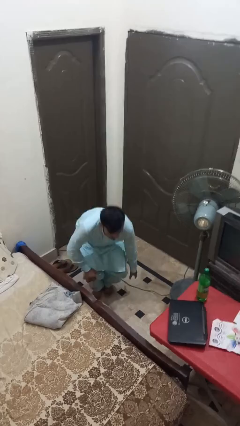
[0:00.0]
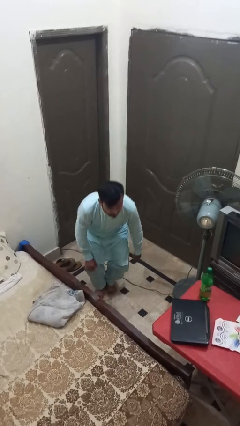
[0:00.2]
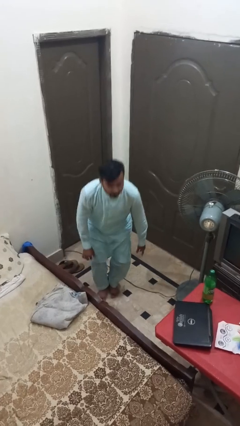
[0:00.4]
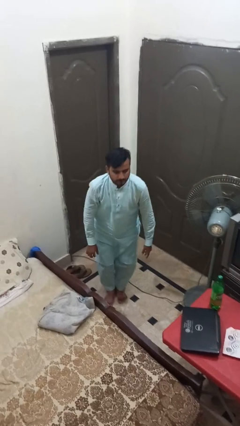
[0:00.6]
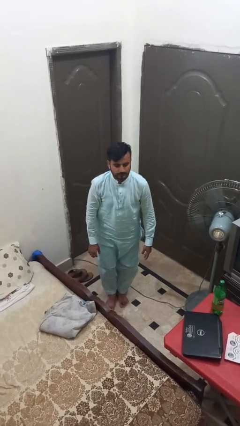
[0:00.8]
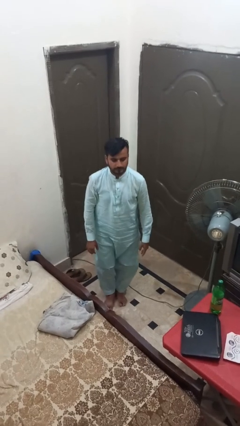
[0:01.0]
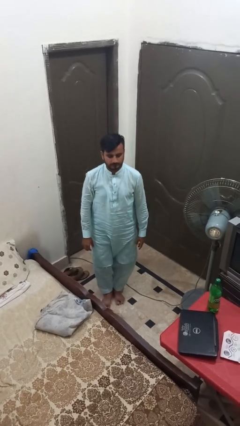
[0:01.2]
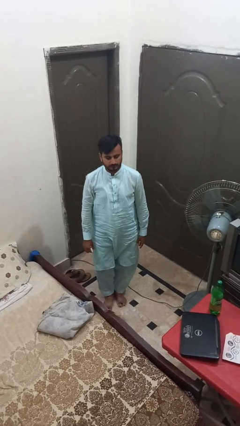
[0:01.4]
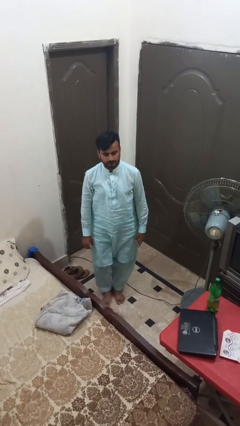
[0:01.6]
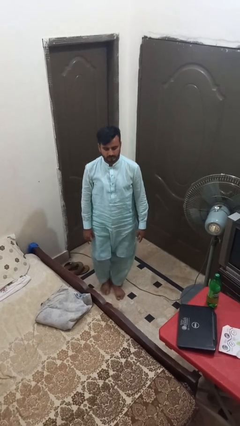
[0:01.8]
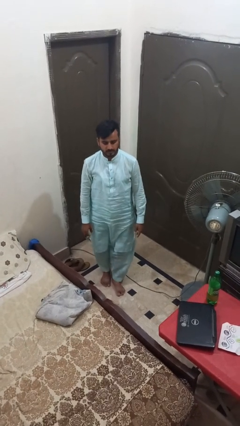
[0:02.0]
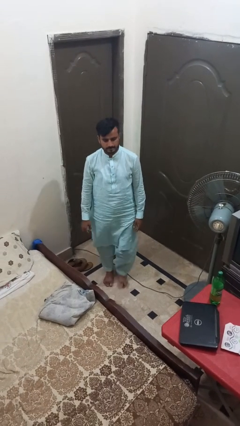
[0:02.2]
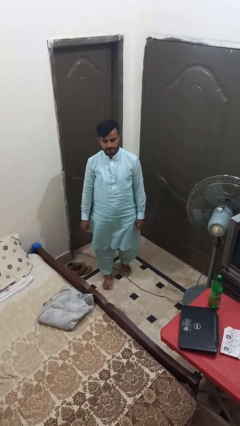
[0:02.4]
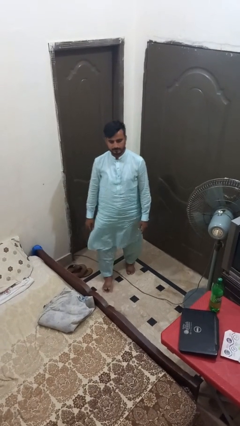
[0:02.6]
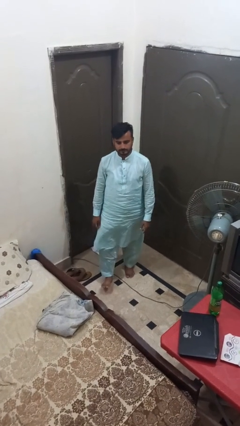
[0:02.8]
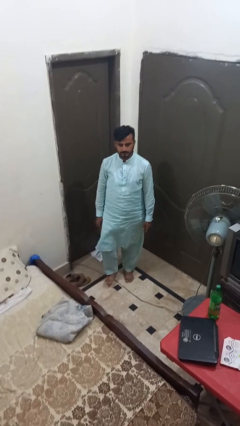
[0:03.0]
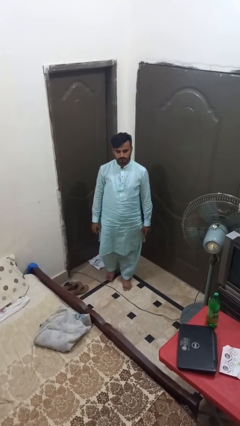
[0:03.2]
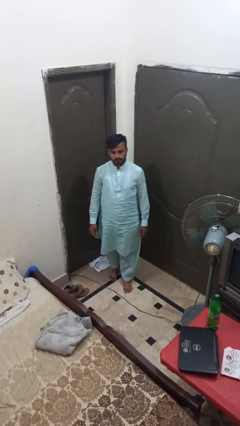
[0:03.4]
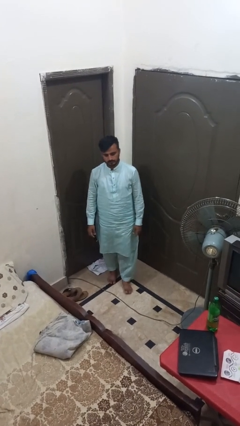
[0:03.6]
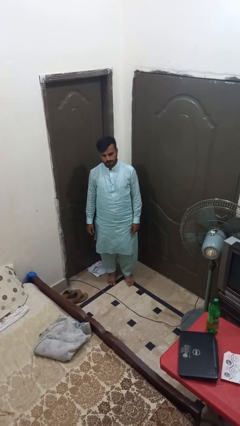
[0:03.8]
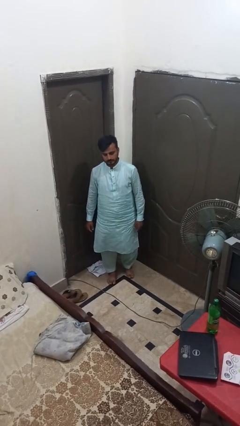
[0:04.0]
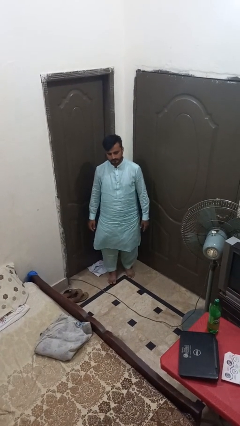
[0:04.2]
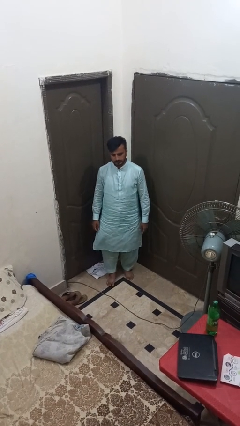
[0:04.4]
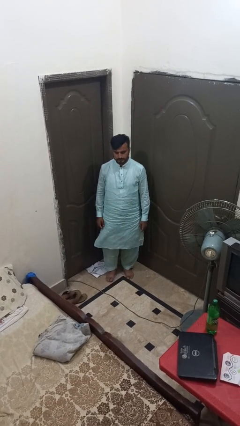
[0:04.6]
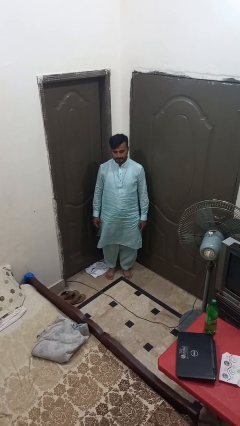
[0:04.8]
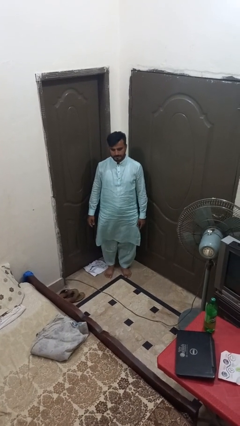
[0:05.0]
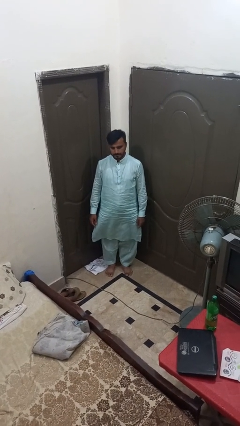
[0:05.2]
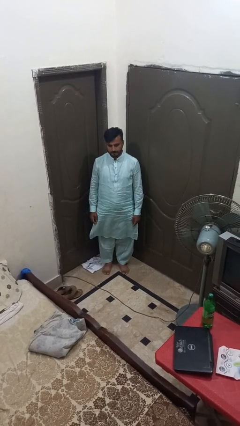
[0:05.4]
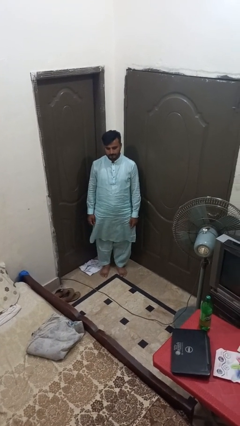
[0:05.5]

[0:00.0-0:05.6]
person stands up from floor

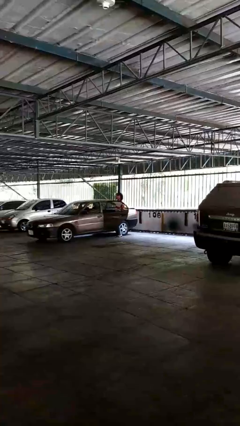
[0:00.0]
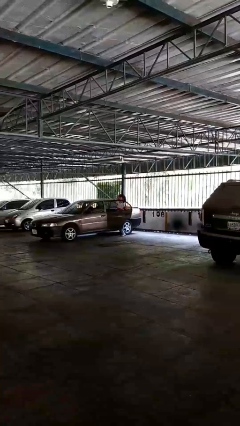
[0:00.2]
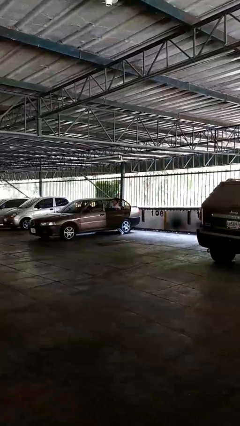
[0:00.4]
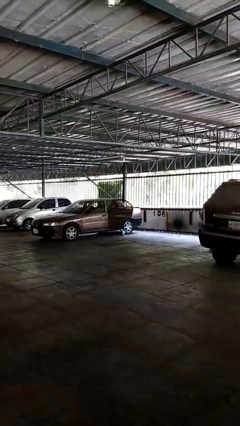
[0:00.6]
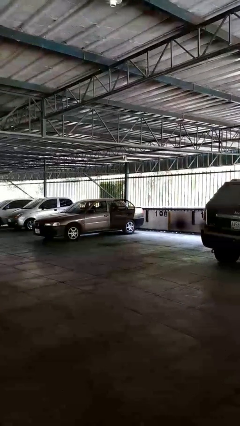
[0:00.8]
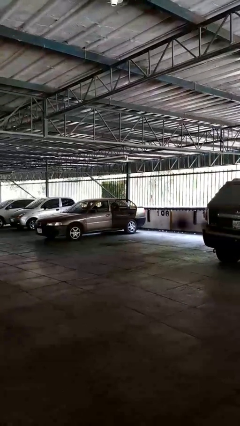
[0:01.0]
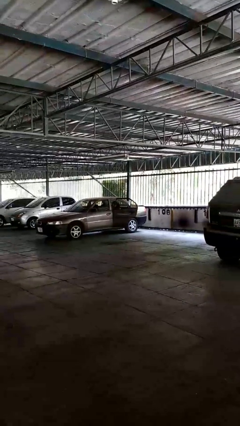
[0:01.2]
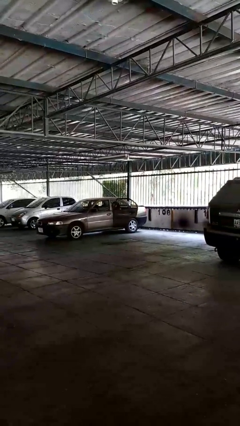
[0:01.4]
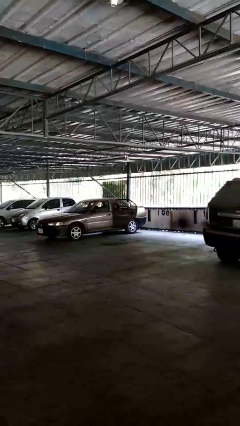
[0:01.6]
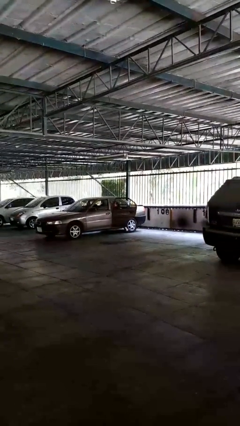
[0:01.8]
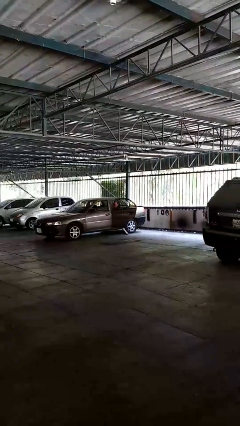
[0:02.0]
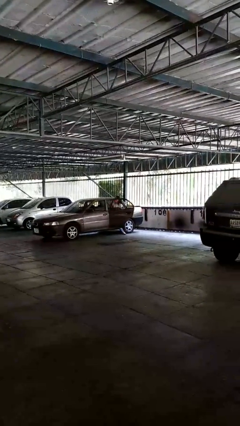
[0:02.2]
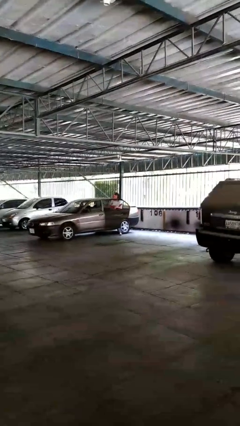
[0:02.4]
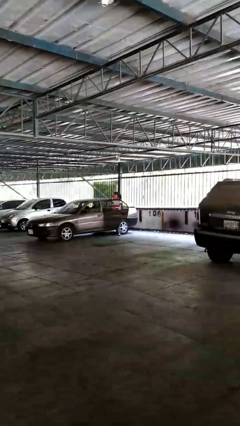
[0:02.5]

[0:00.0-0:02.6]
person enters car

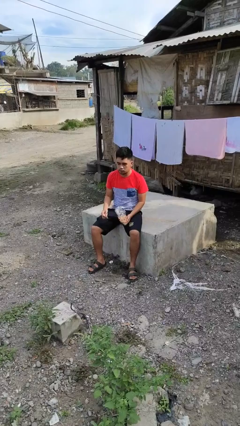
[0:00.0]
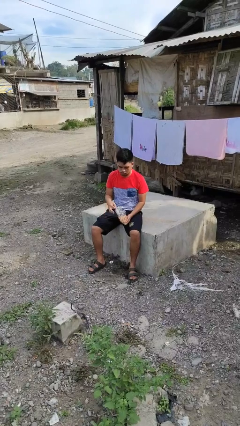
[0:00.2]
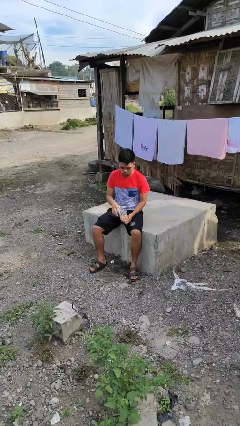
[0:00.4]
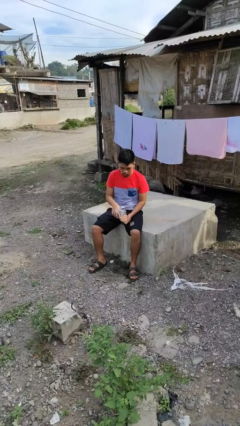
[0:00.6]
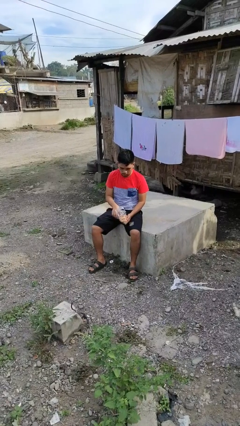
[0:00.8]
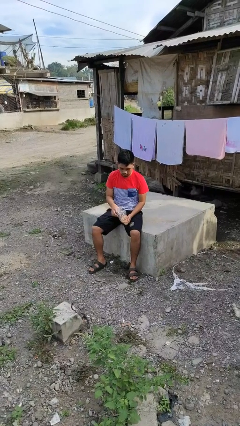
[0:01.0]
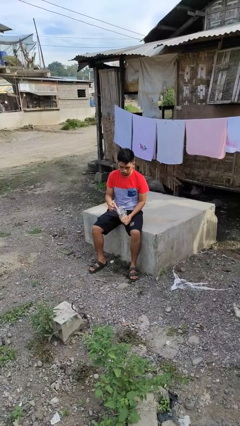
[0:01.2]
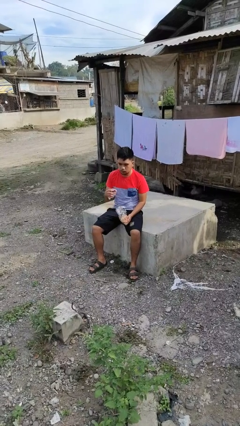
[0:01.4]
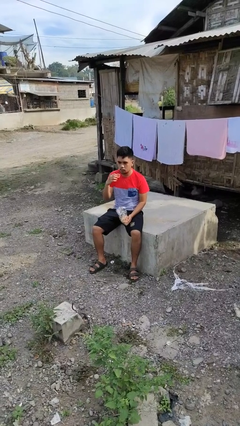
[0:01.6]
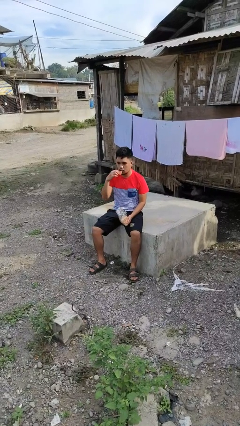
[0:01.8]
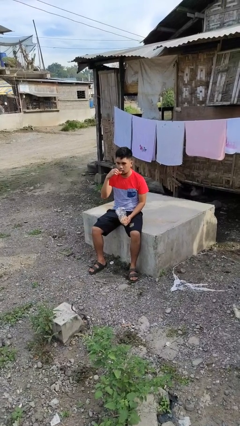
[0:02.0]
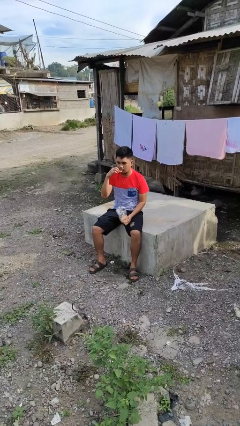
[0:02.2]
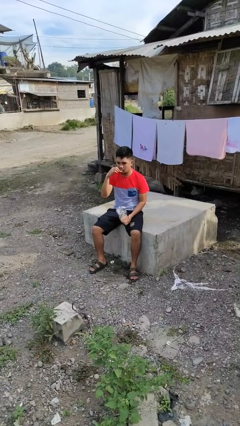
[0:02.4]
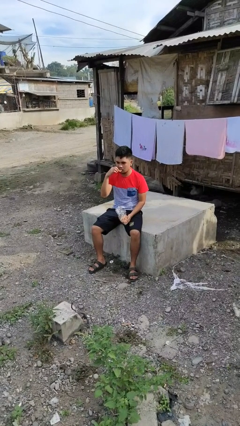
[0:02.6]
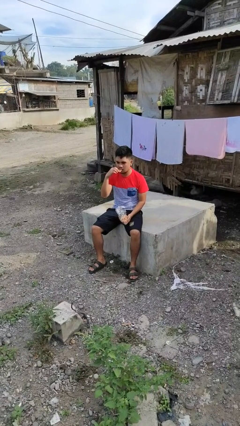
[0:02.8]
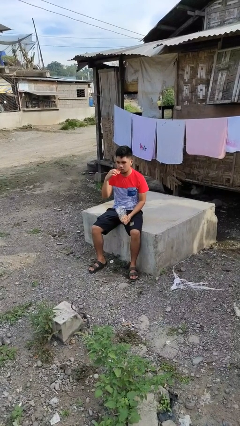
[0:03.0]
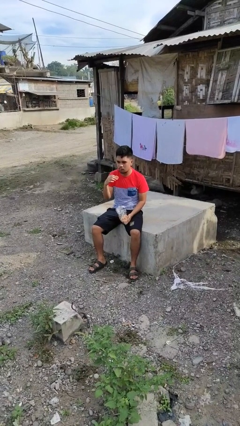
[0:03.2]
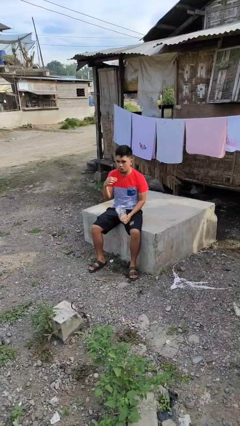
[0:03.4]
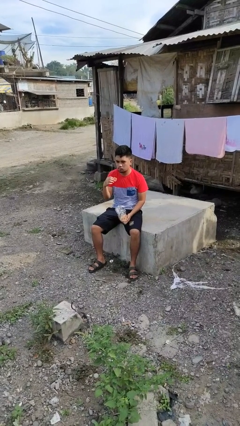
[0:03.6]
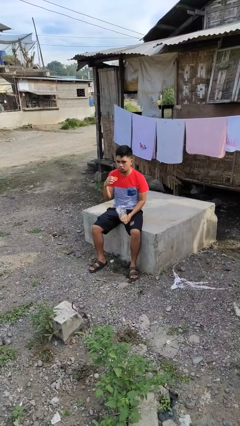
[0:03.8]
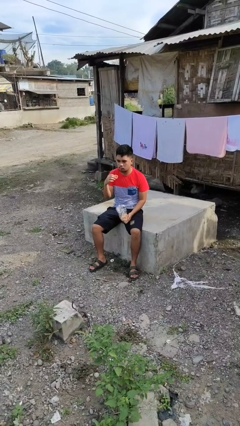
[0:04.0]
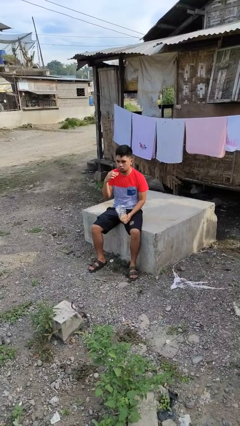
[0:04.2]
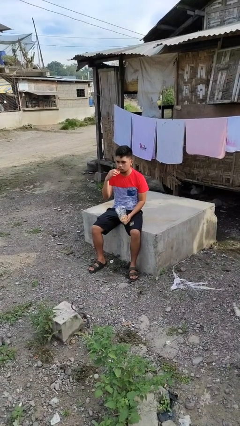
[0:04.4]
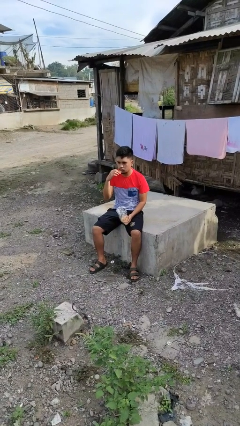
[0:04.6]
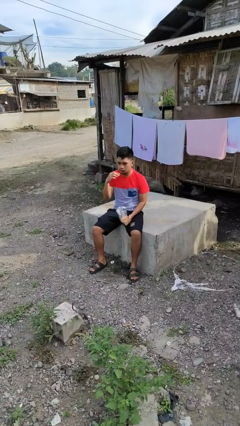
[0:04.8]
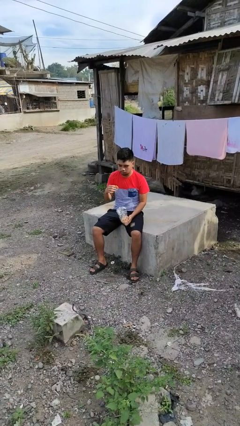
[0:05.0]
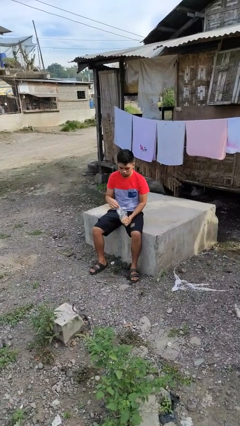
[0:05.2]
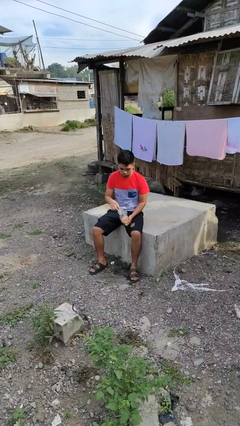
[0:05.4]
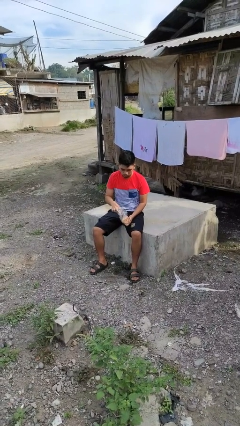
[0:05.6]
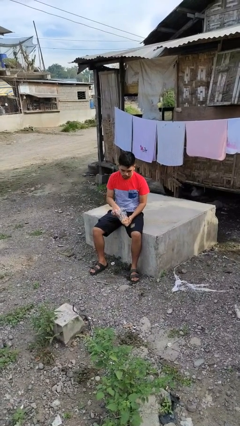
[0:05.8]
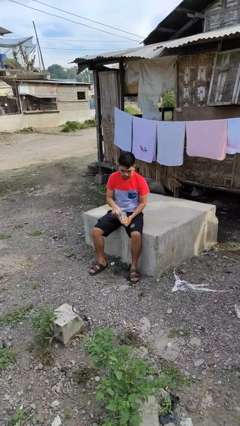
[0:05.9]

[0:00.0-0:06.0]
person eats snack from bag

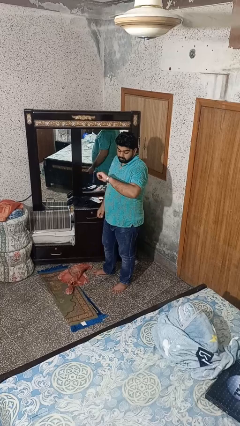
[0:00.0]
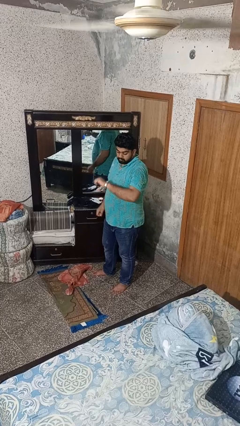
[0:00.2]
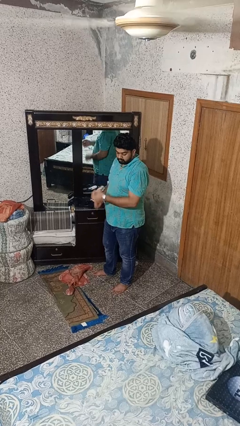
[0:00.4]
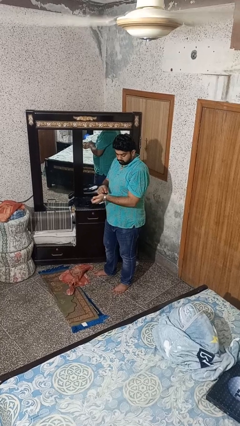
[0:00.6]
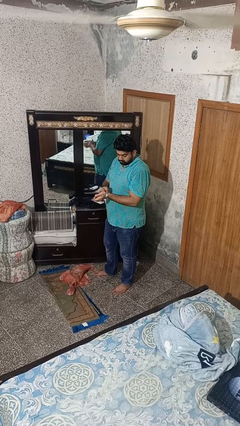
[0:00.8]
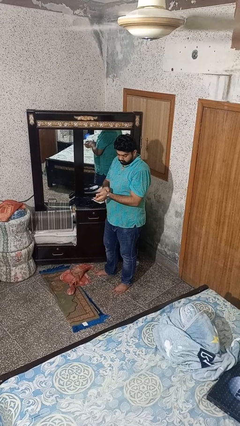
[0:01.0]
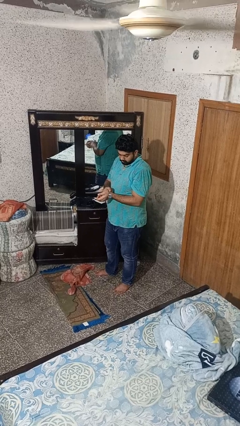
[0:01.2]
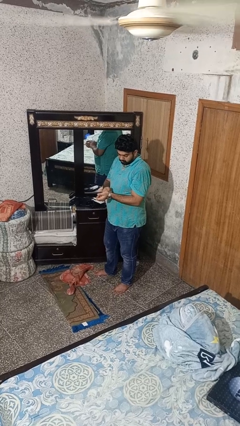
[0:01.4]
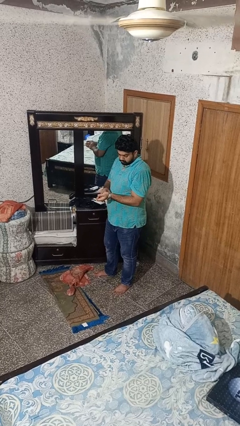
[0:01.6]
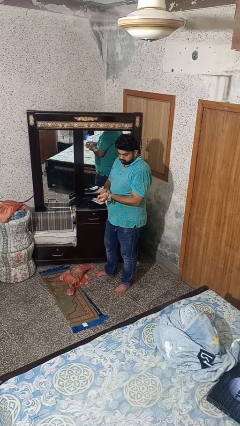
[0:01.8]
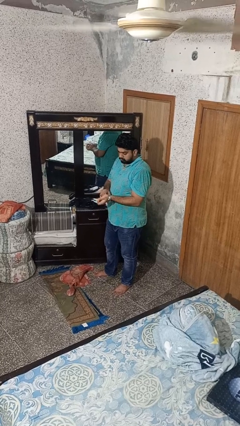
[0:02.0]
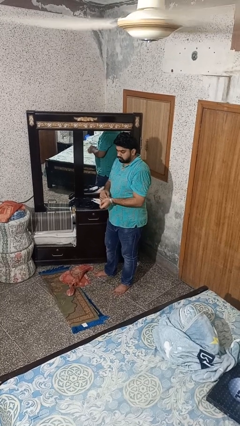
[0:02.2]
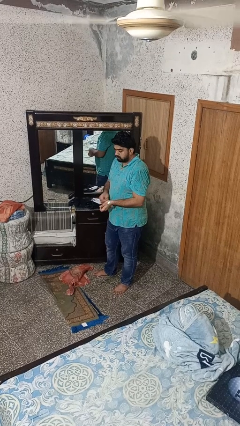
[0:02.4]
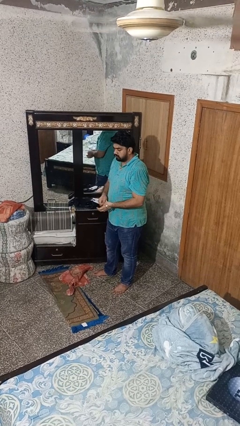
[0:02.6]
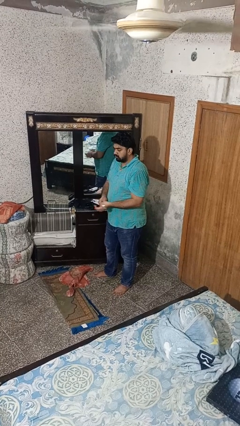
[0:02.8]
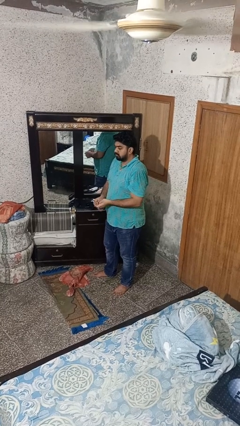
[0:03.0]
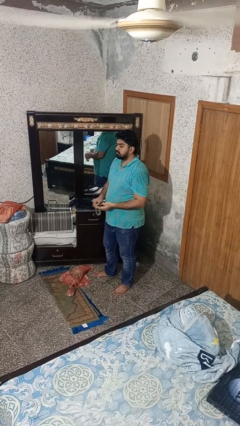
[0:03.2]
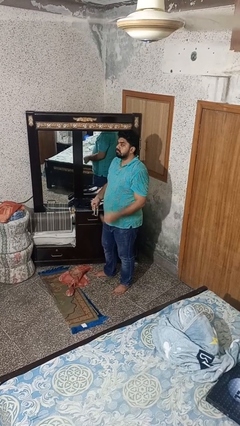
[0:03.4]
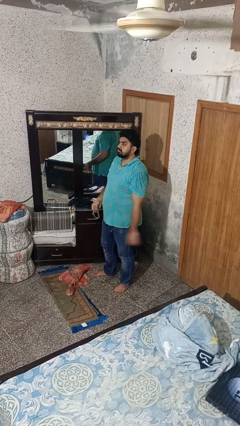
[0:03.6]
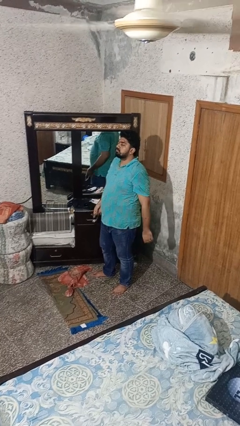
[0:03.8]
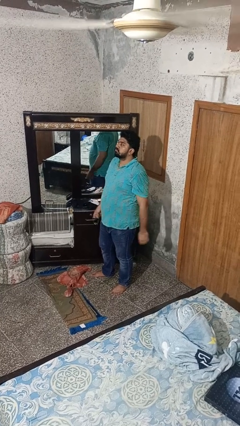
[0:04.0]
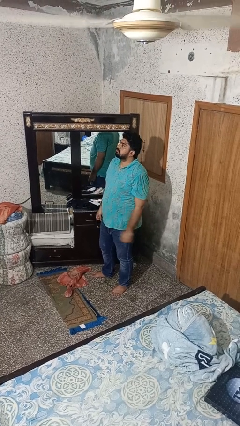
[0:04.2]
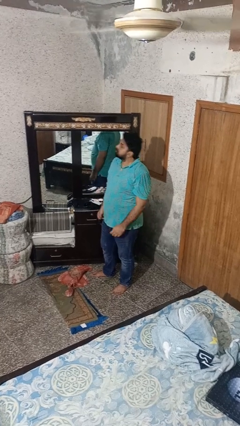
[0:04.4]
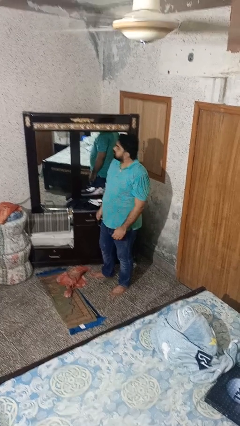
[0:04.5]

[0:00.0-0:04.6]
person takes off wristwatch
